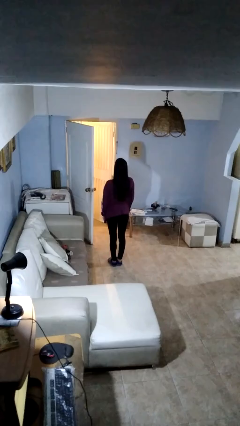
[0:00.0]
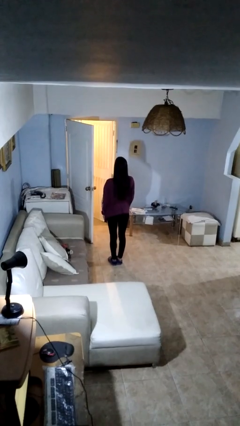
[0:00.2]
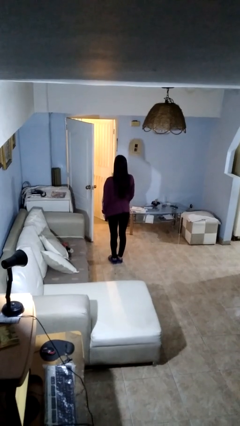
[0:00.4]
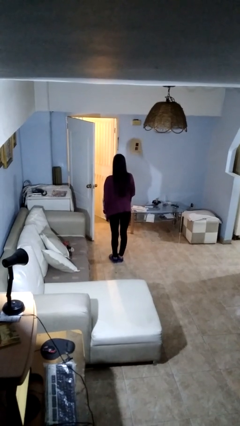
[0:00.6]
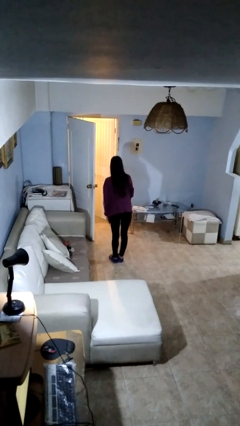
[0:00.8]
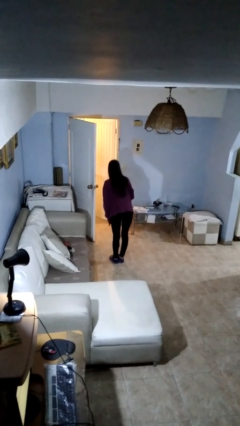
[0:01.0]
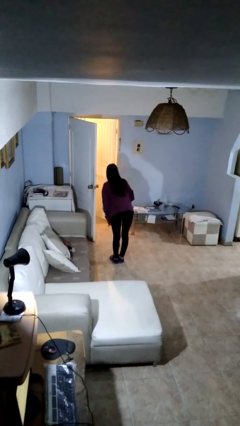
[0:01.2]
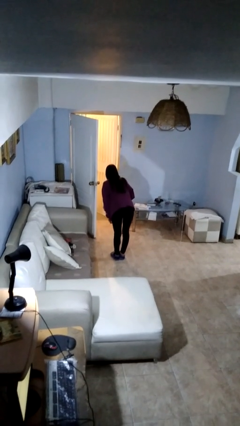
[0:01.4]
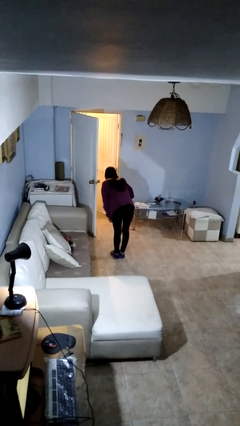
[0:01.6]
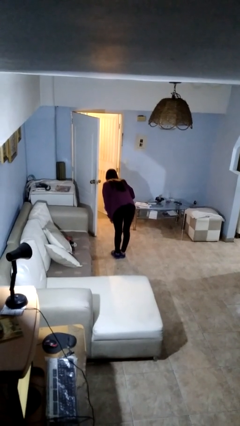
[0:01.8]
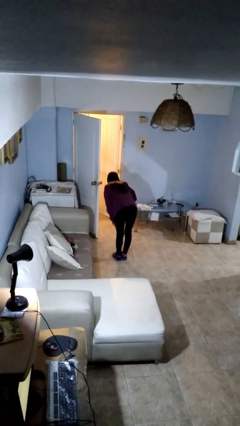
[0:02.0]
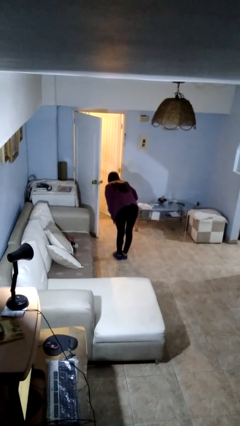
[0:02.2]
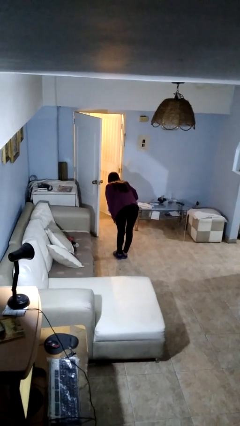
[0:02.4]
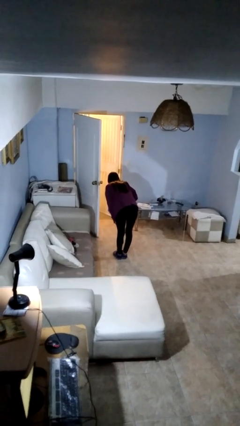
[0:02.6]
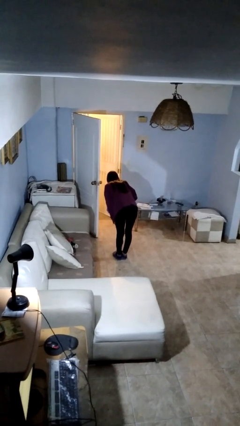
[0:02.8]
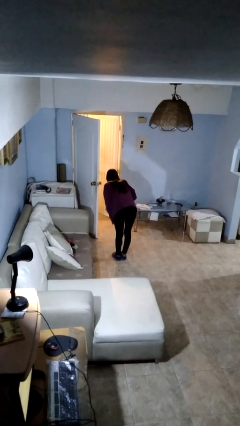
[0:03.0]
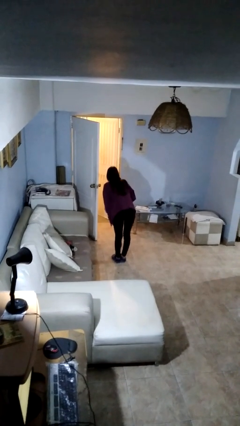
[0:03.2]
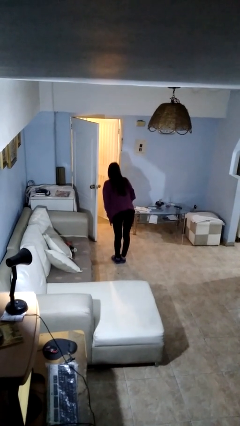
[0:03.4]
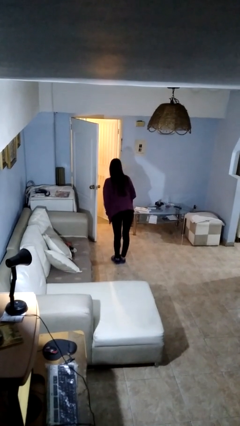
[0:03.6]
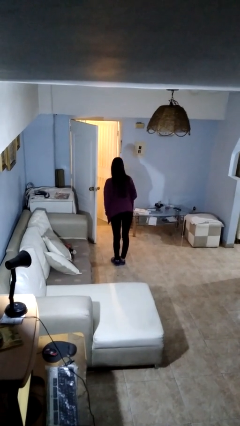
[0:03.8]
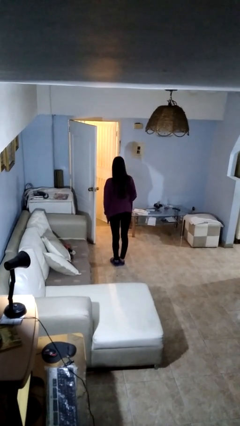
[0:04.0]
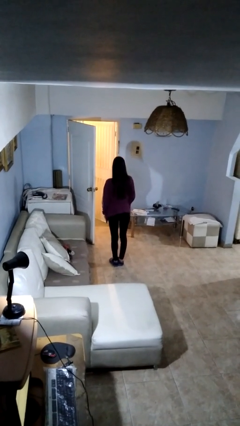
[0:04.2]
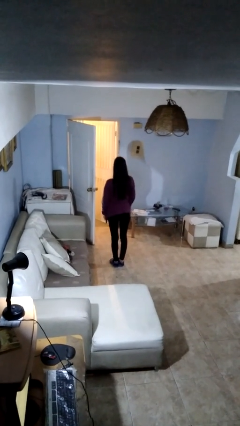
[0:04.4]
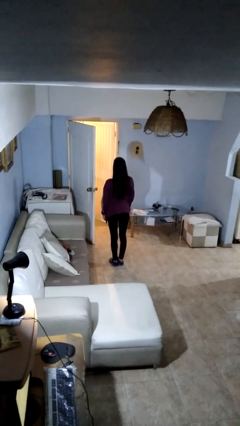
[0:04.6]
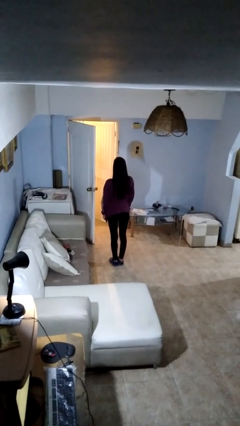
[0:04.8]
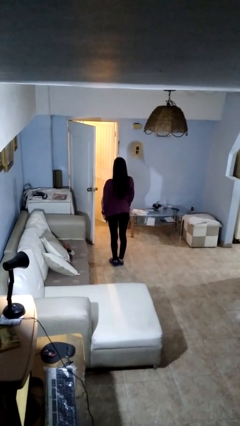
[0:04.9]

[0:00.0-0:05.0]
person bows

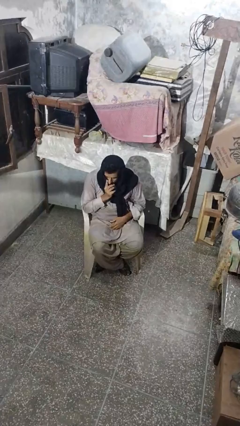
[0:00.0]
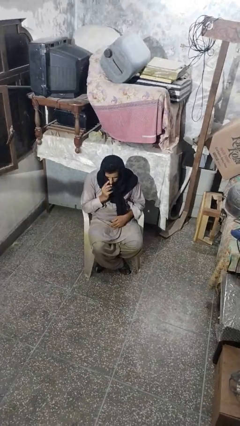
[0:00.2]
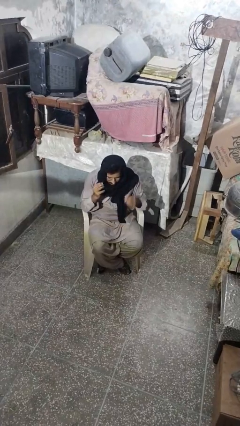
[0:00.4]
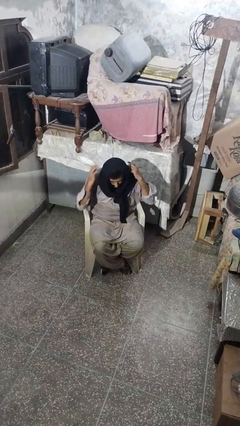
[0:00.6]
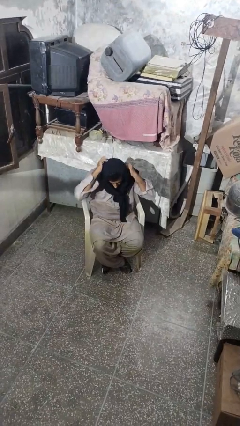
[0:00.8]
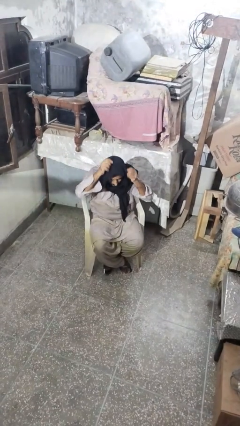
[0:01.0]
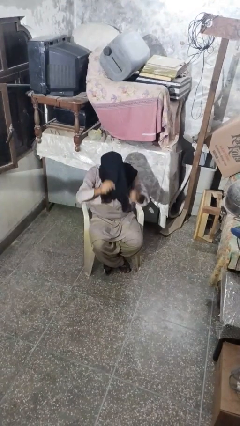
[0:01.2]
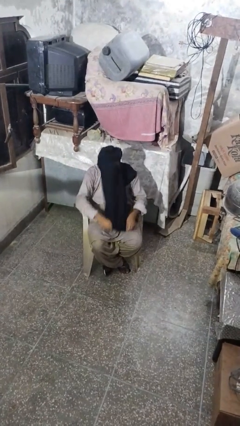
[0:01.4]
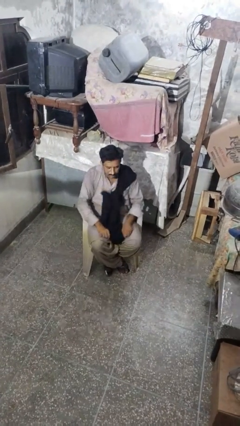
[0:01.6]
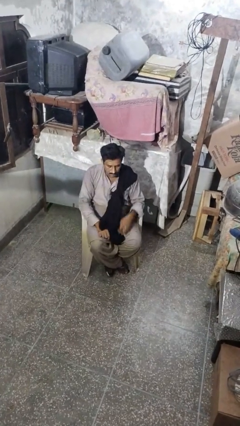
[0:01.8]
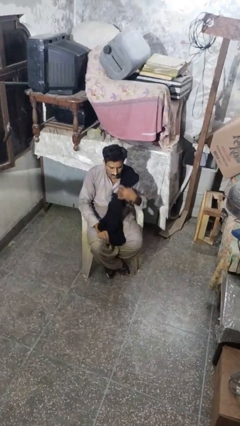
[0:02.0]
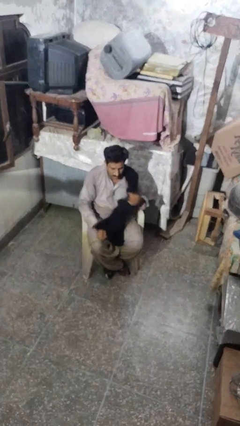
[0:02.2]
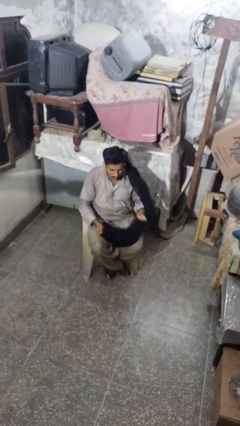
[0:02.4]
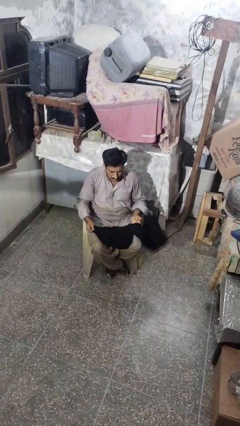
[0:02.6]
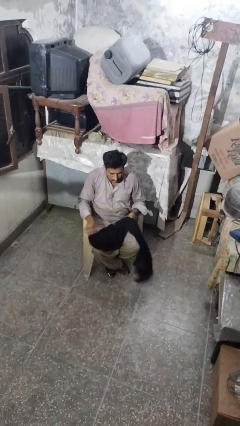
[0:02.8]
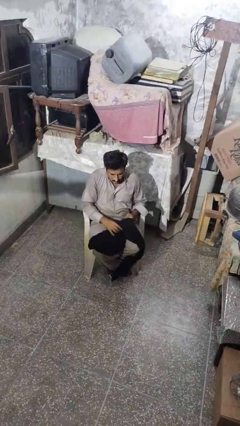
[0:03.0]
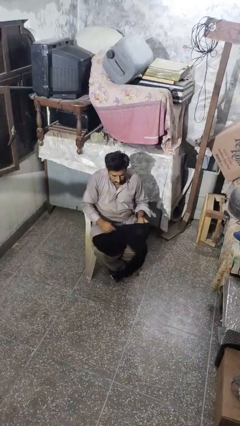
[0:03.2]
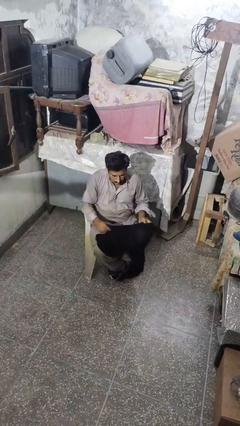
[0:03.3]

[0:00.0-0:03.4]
person takes off scarf

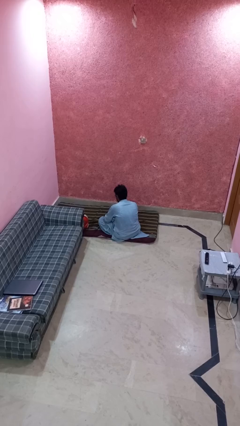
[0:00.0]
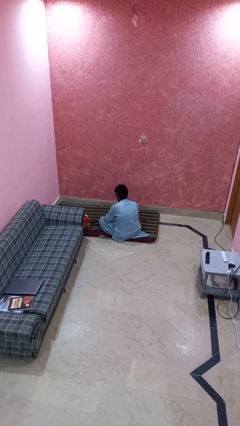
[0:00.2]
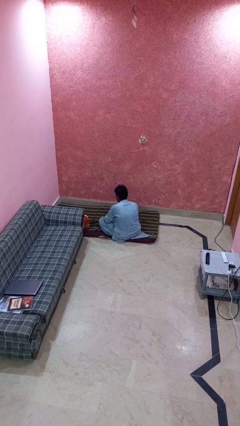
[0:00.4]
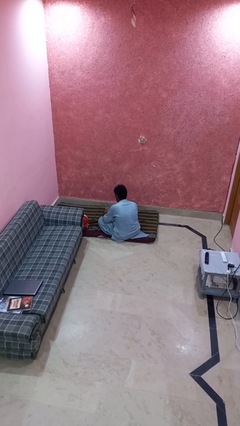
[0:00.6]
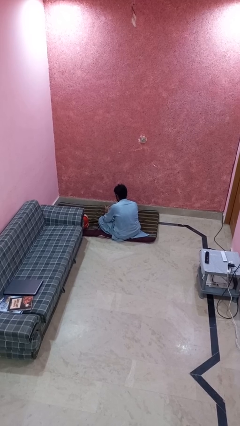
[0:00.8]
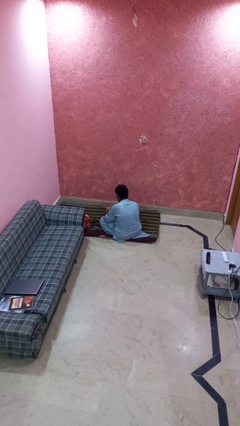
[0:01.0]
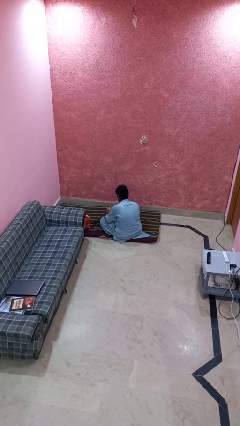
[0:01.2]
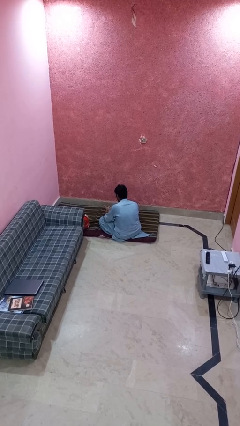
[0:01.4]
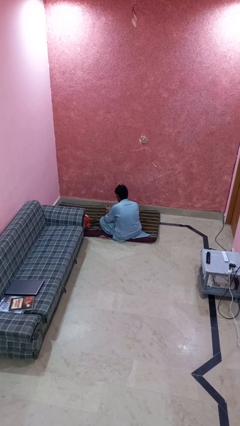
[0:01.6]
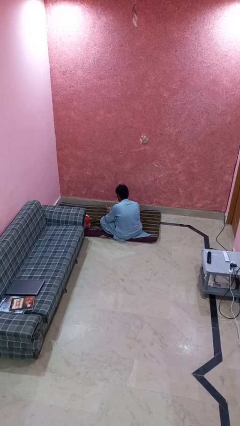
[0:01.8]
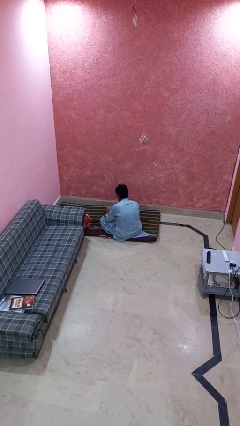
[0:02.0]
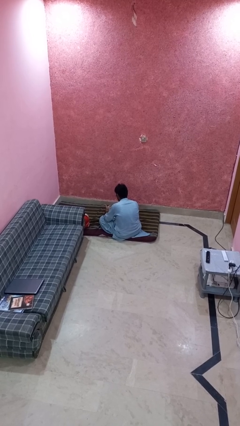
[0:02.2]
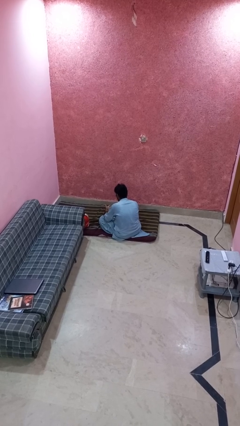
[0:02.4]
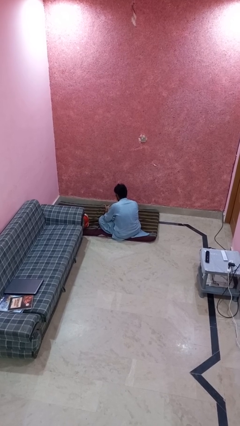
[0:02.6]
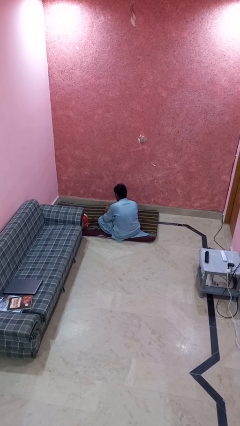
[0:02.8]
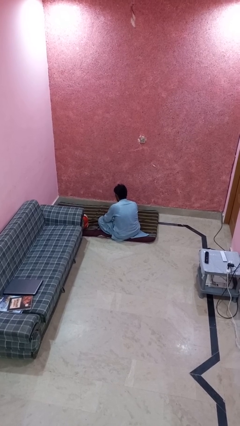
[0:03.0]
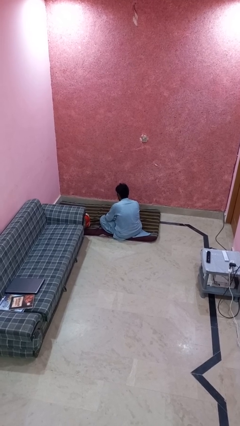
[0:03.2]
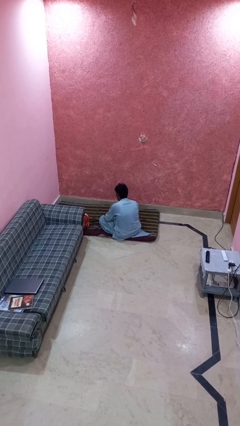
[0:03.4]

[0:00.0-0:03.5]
person looks at hands in lap

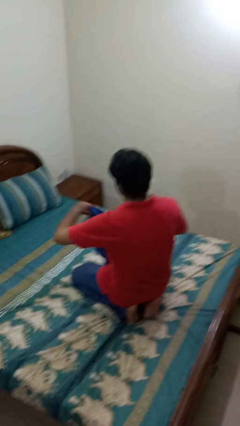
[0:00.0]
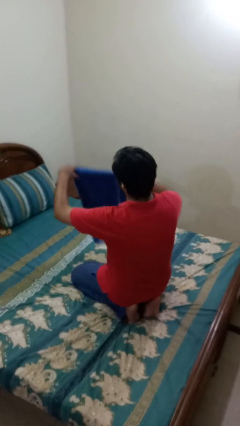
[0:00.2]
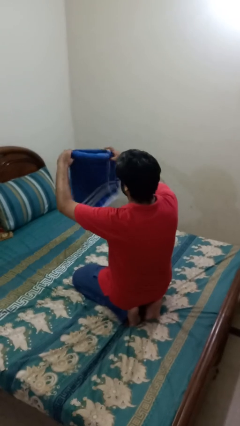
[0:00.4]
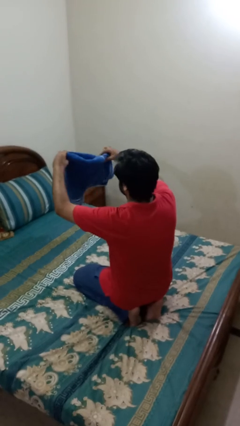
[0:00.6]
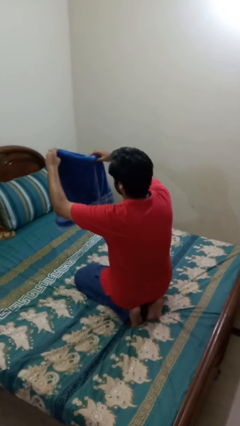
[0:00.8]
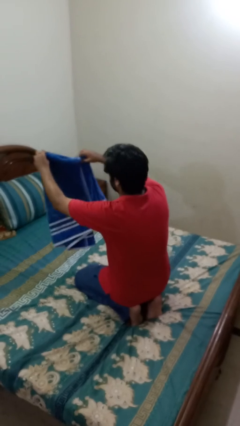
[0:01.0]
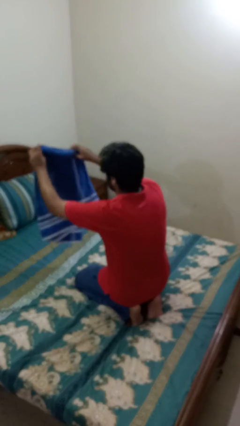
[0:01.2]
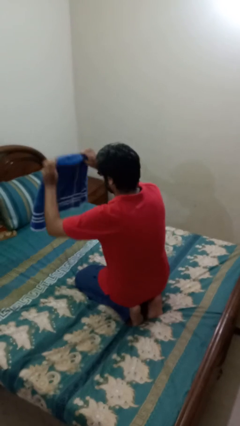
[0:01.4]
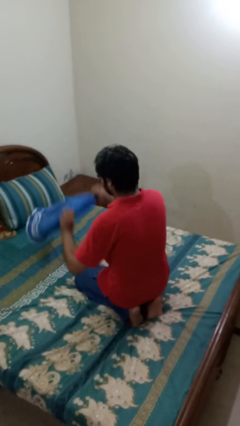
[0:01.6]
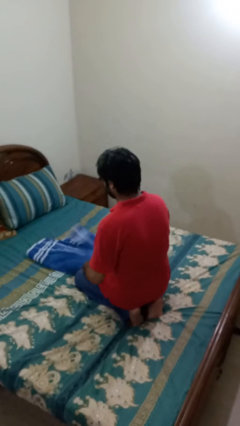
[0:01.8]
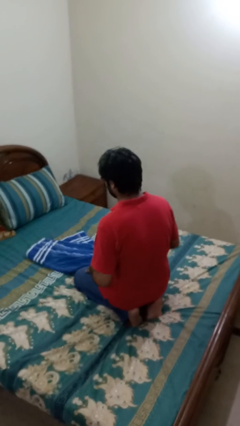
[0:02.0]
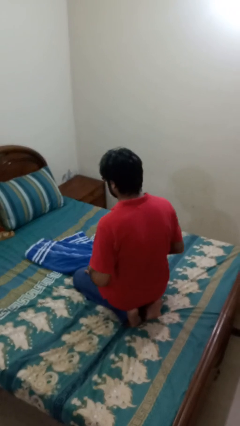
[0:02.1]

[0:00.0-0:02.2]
person folds towel

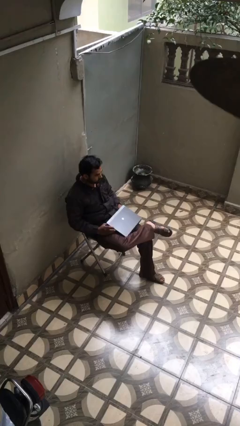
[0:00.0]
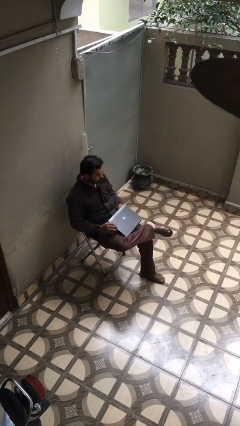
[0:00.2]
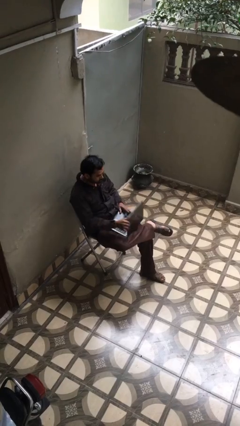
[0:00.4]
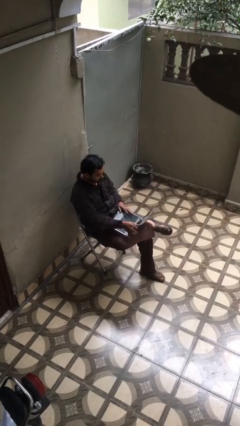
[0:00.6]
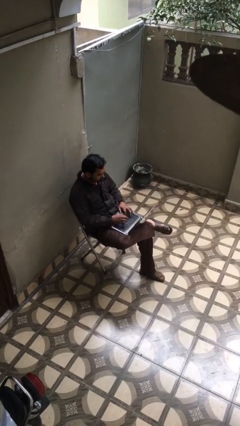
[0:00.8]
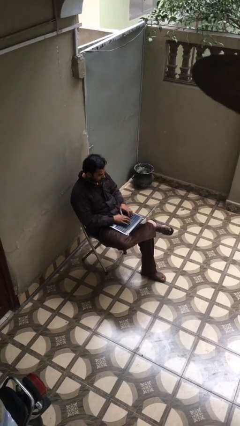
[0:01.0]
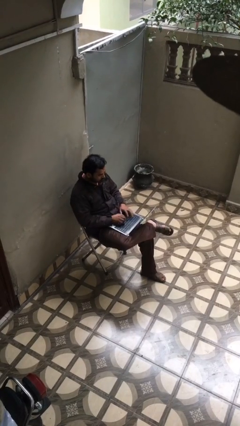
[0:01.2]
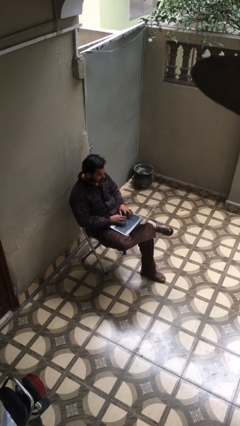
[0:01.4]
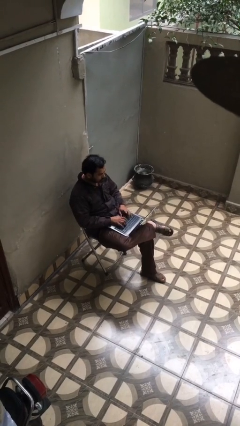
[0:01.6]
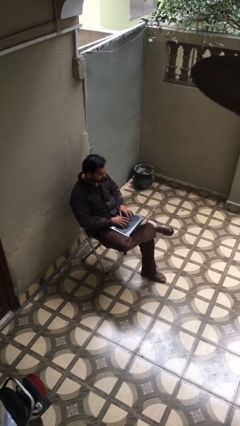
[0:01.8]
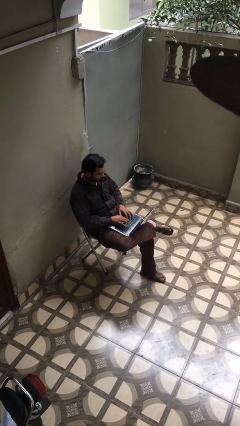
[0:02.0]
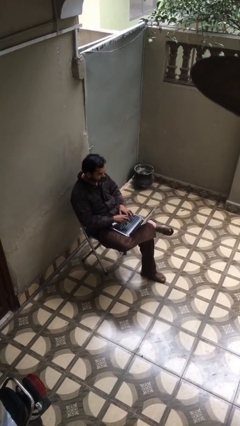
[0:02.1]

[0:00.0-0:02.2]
person interacts with laptop

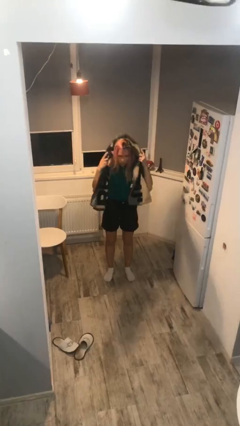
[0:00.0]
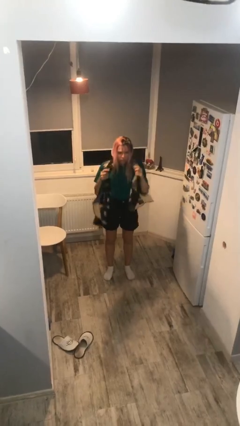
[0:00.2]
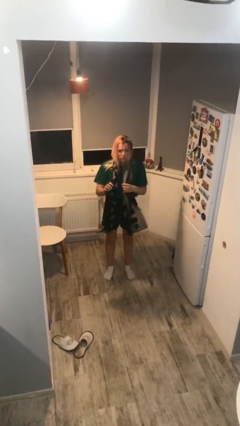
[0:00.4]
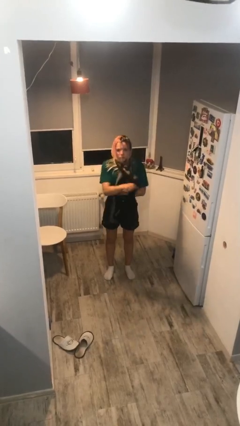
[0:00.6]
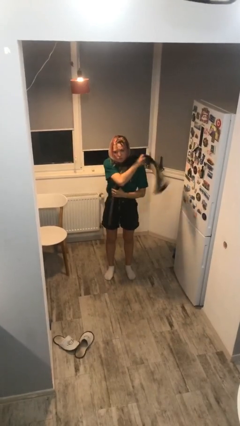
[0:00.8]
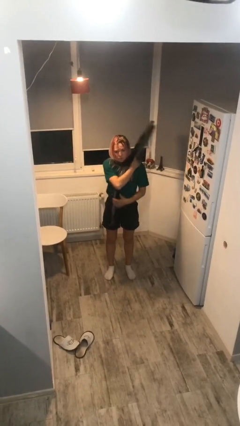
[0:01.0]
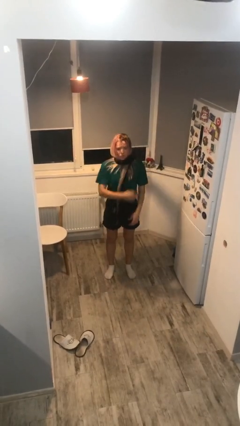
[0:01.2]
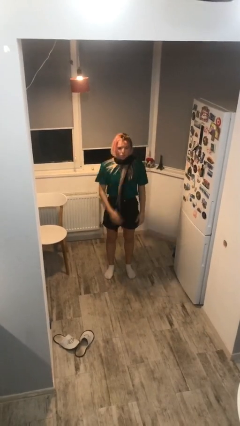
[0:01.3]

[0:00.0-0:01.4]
person puts on scarf

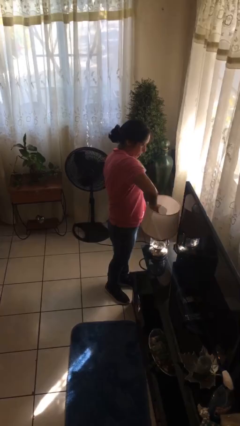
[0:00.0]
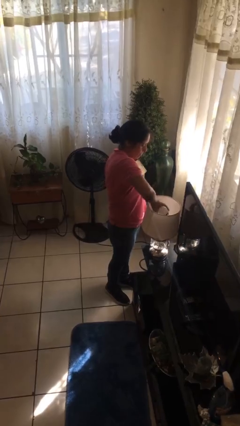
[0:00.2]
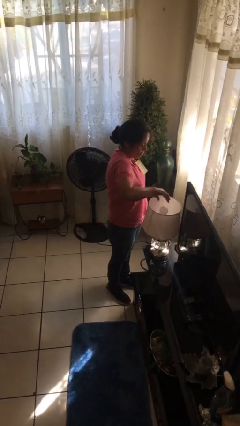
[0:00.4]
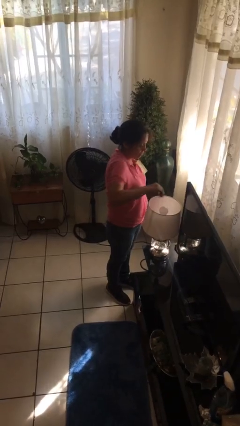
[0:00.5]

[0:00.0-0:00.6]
person turns off lamp
